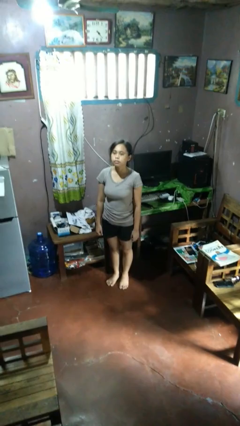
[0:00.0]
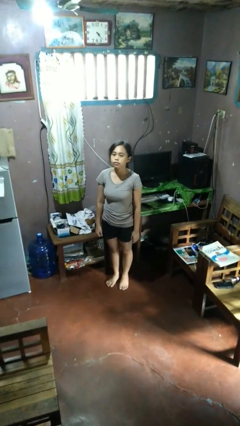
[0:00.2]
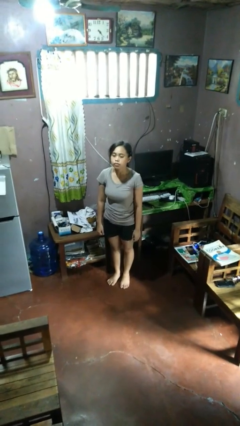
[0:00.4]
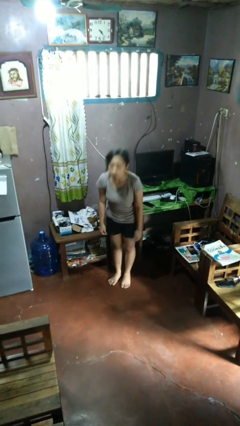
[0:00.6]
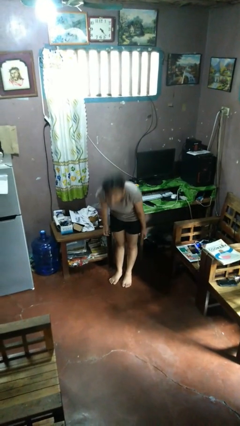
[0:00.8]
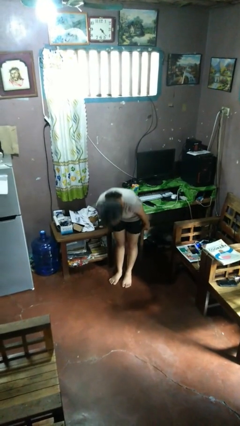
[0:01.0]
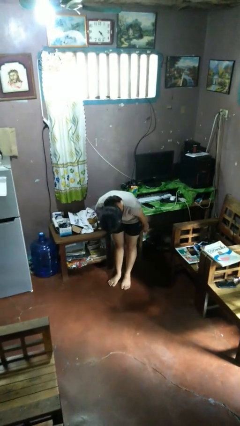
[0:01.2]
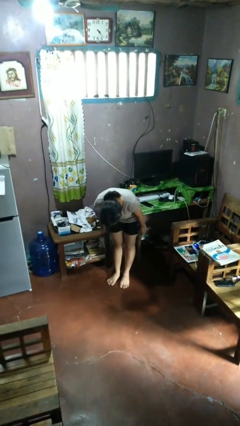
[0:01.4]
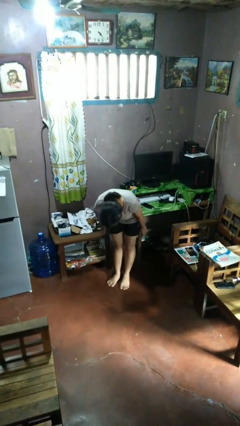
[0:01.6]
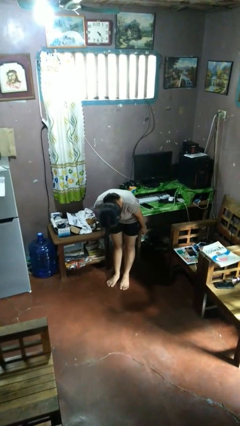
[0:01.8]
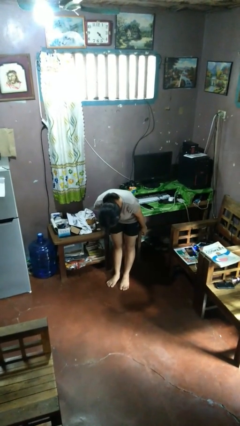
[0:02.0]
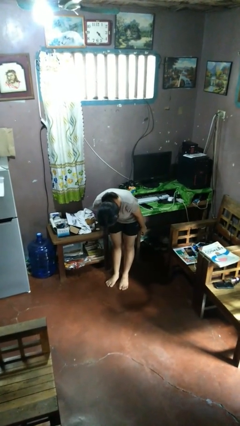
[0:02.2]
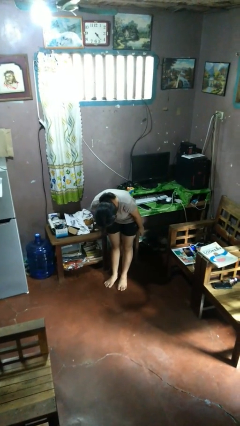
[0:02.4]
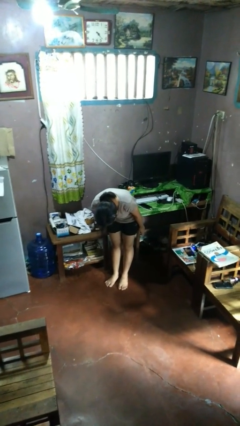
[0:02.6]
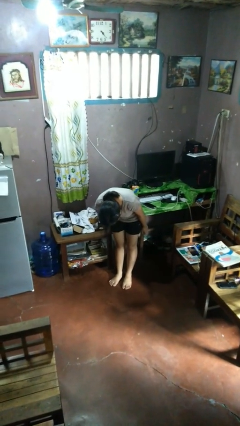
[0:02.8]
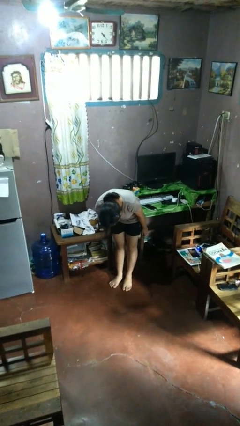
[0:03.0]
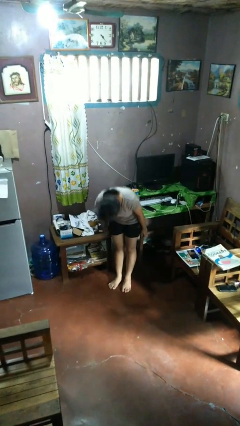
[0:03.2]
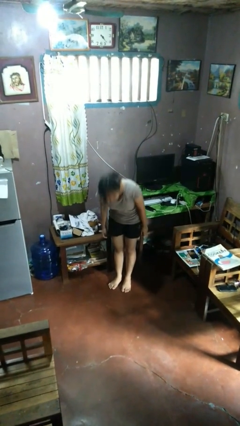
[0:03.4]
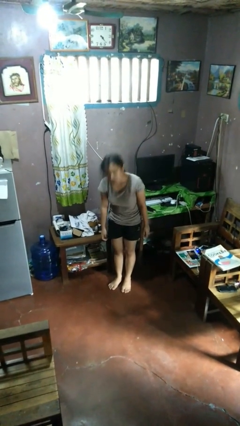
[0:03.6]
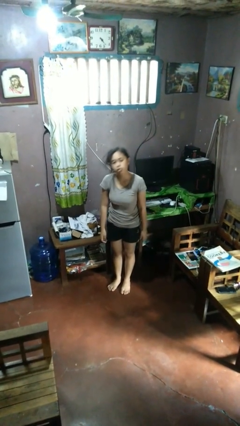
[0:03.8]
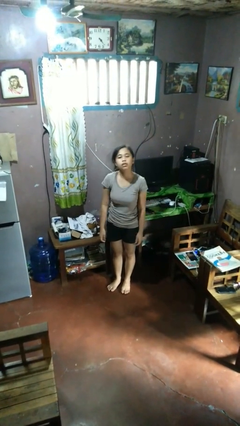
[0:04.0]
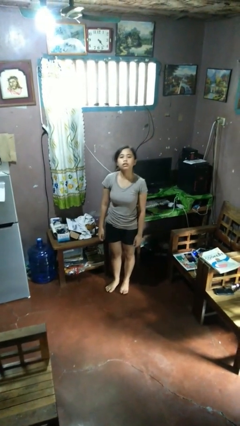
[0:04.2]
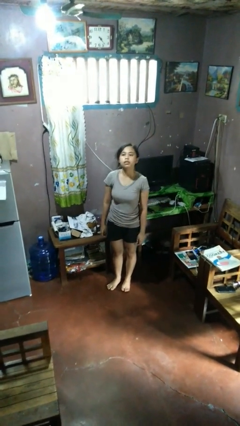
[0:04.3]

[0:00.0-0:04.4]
person bows

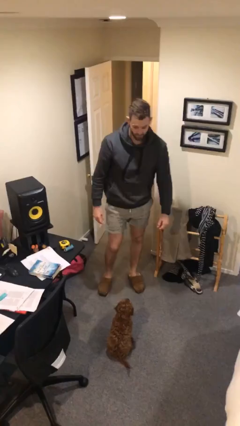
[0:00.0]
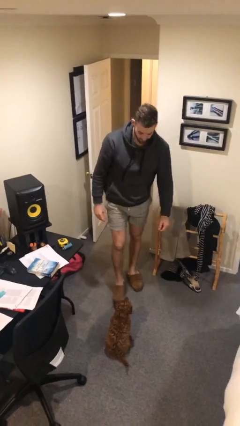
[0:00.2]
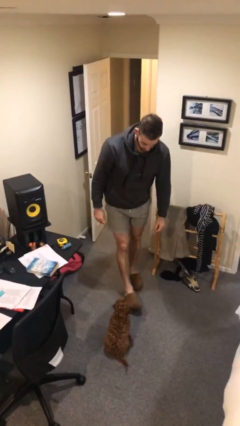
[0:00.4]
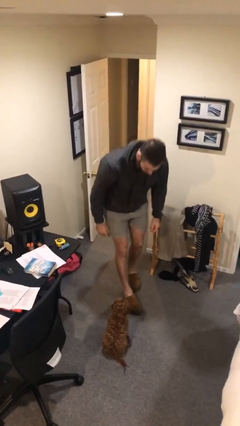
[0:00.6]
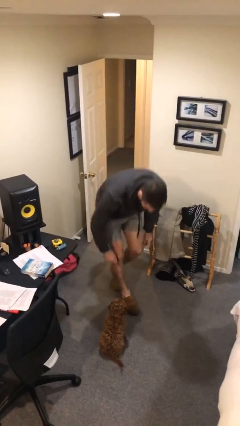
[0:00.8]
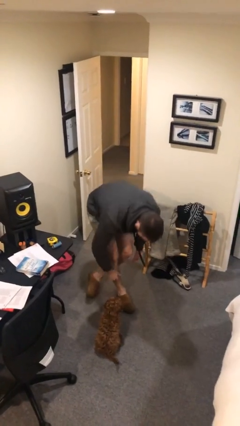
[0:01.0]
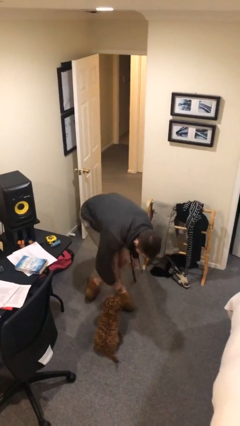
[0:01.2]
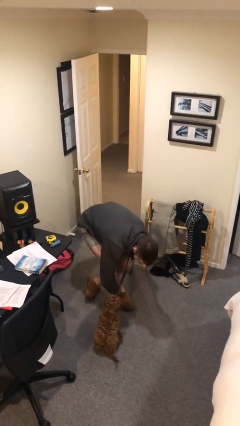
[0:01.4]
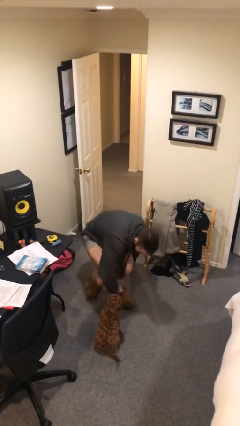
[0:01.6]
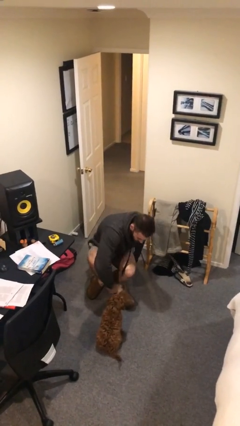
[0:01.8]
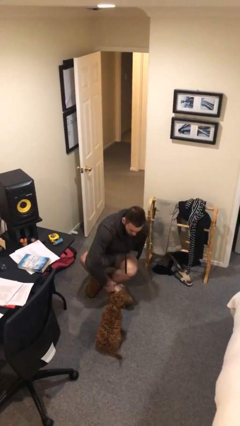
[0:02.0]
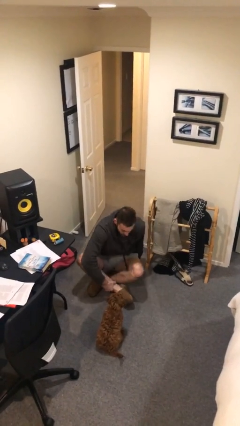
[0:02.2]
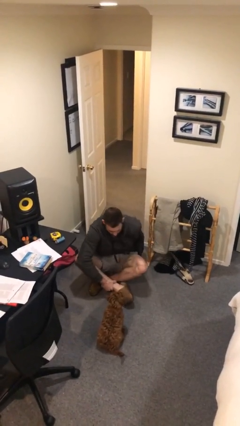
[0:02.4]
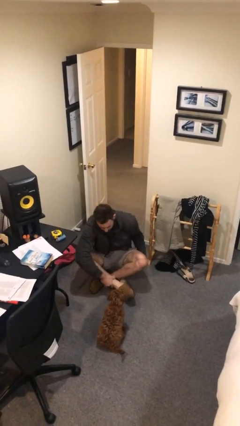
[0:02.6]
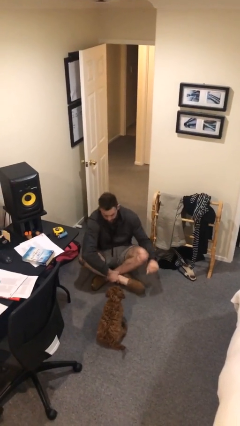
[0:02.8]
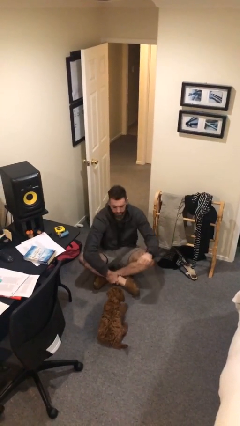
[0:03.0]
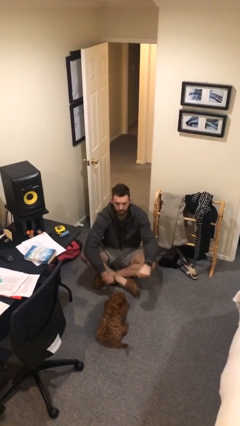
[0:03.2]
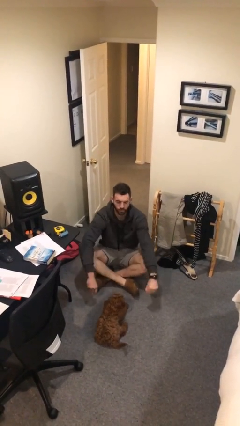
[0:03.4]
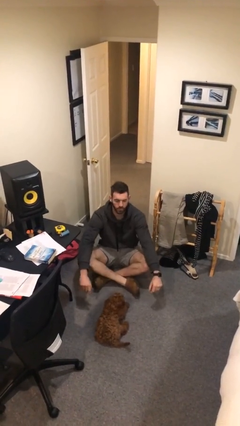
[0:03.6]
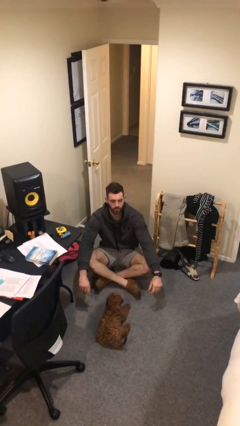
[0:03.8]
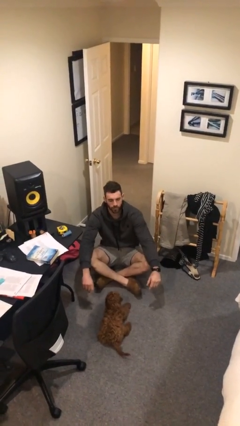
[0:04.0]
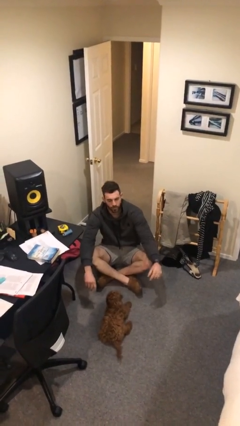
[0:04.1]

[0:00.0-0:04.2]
person sits crisscross

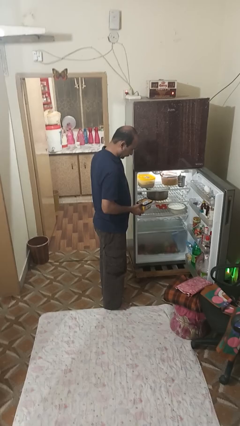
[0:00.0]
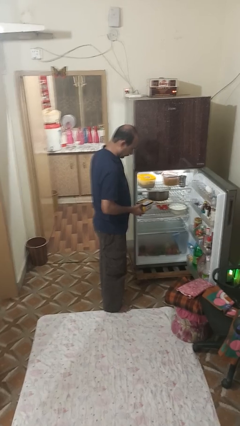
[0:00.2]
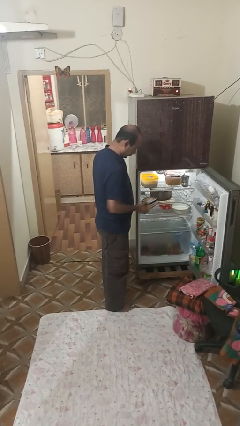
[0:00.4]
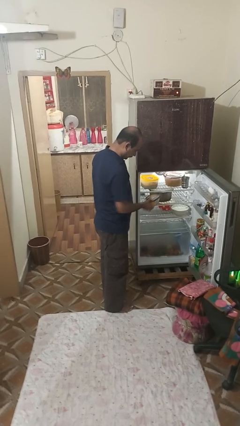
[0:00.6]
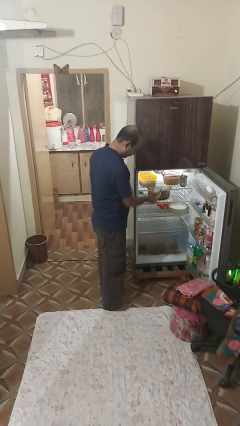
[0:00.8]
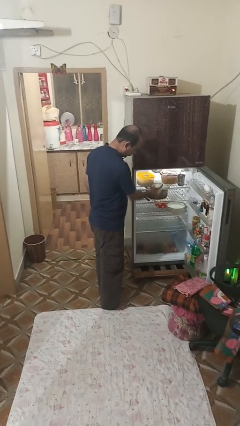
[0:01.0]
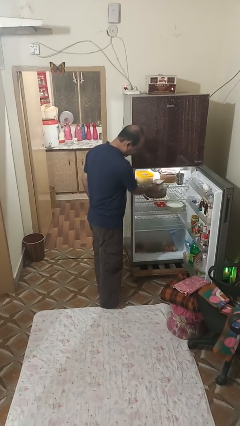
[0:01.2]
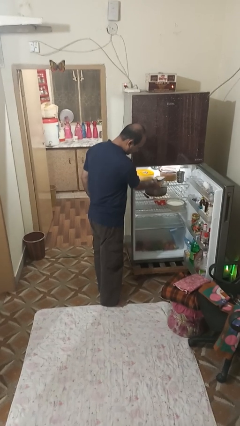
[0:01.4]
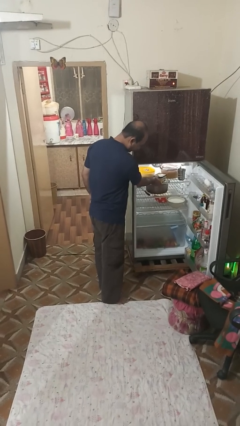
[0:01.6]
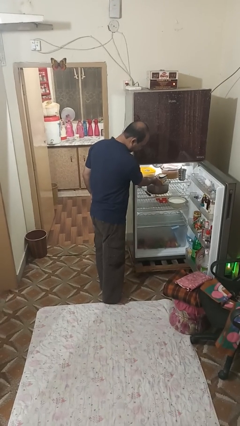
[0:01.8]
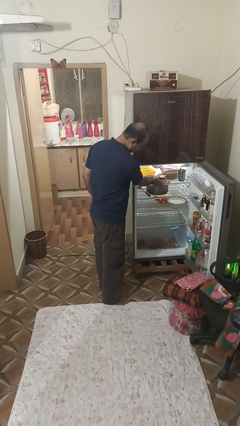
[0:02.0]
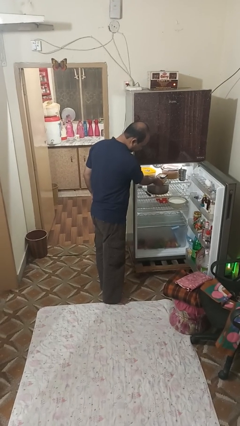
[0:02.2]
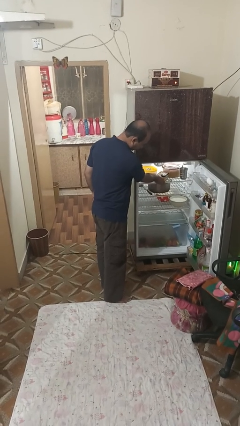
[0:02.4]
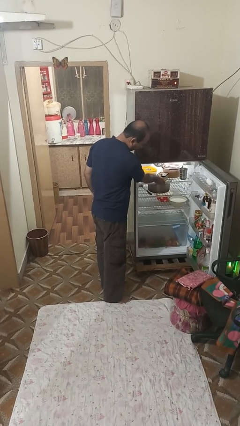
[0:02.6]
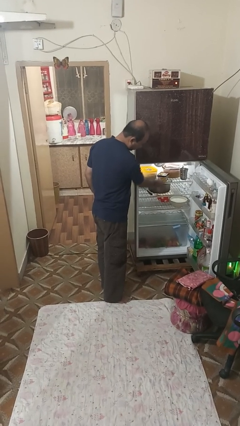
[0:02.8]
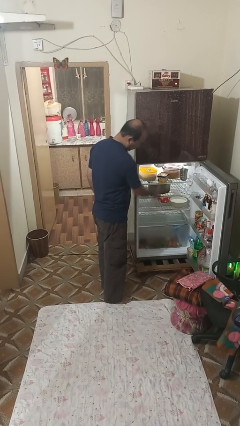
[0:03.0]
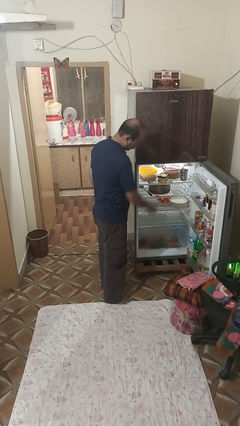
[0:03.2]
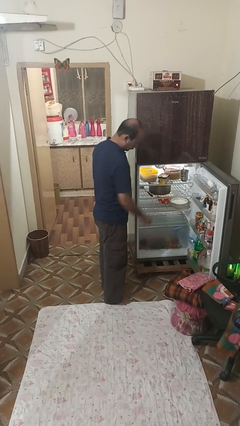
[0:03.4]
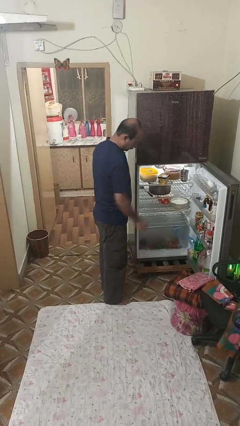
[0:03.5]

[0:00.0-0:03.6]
person puts object into refrigerator

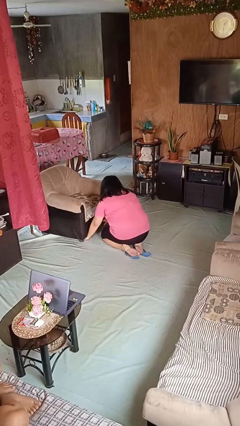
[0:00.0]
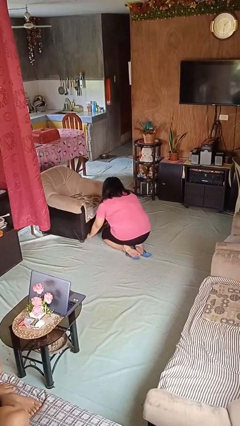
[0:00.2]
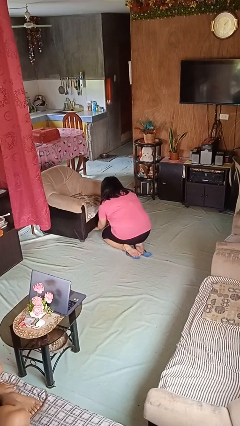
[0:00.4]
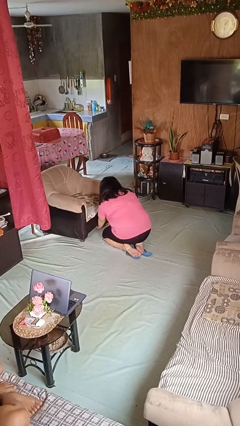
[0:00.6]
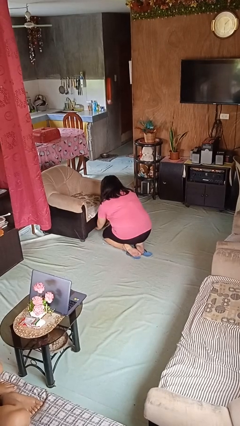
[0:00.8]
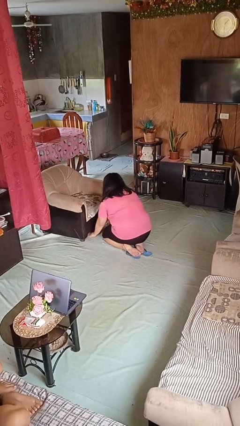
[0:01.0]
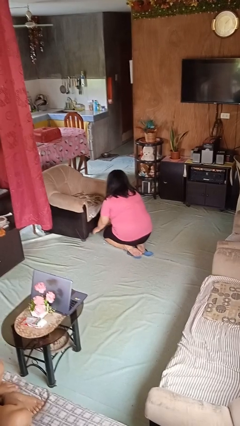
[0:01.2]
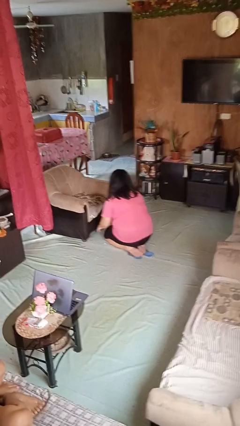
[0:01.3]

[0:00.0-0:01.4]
person searches under couch

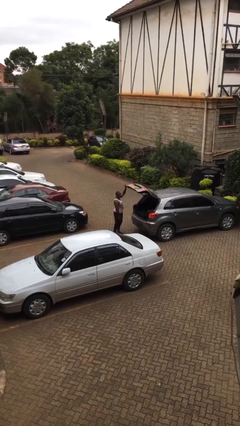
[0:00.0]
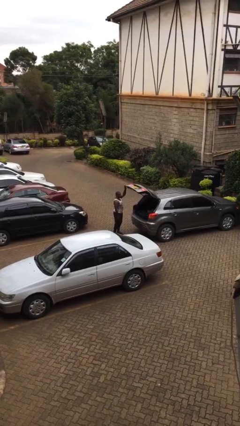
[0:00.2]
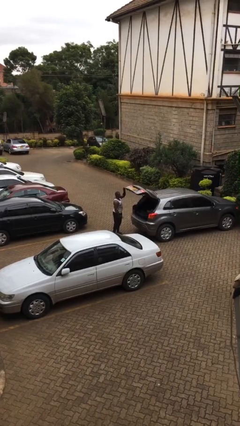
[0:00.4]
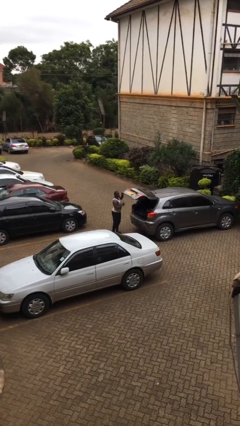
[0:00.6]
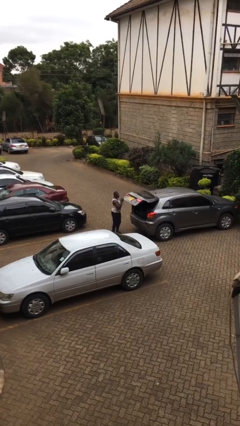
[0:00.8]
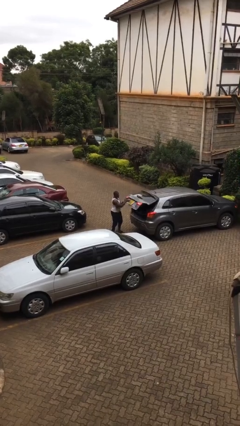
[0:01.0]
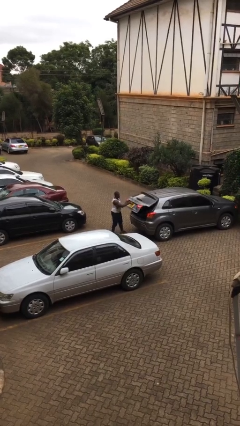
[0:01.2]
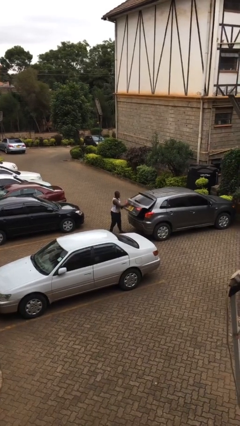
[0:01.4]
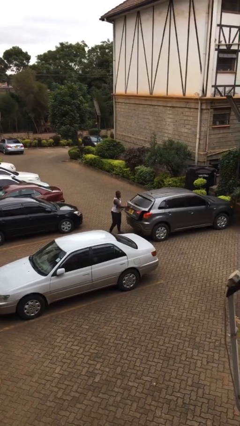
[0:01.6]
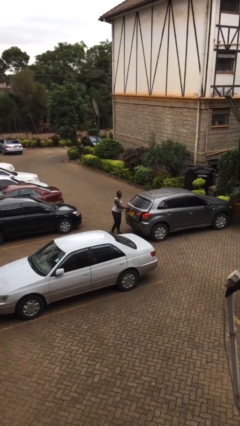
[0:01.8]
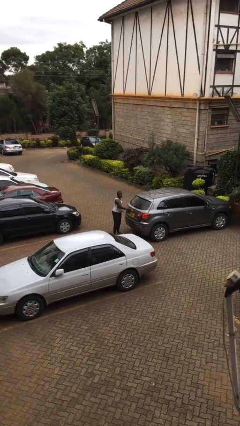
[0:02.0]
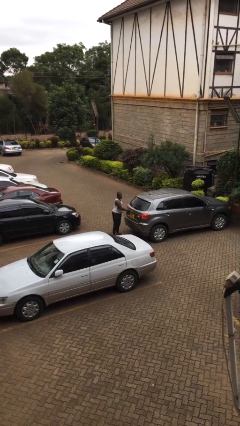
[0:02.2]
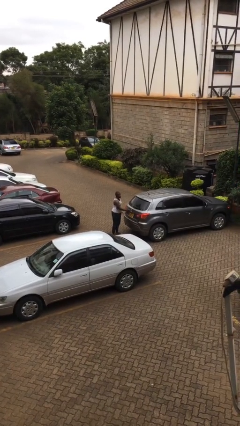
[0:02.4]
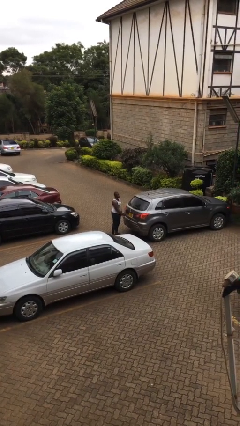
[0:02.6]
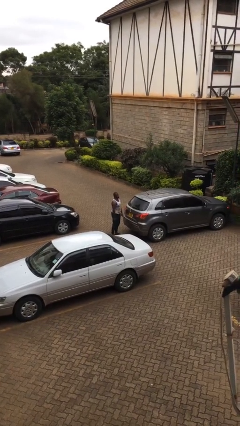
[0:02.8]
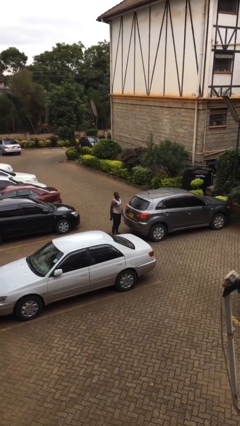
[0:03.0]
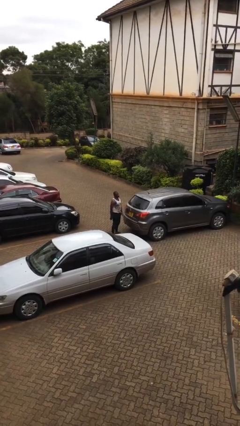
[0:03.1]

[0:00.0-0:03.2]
person closes car trunk

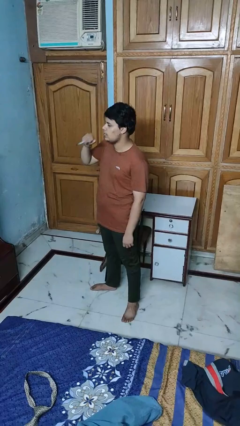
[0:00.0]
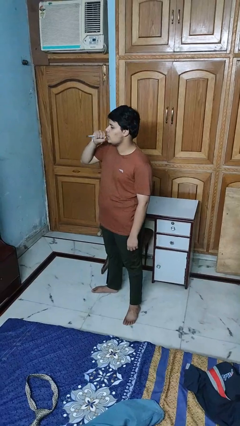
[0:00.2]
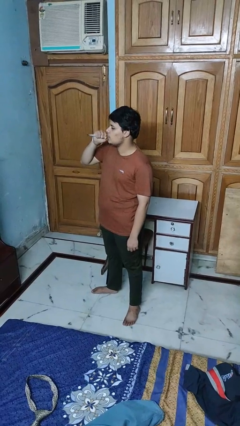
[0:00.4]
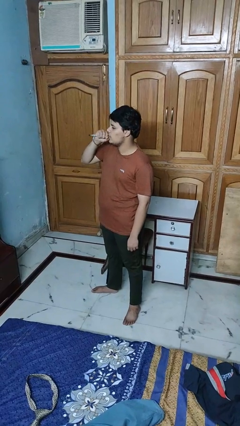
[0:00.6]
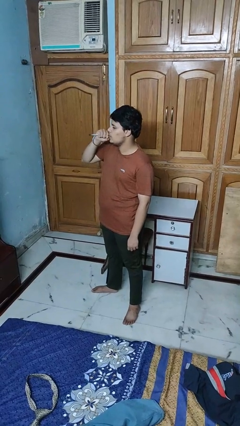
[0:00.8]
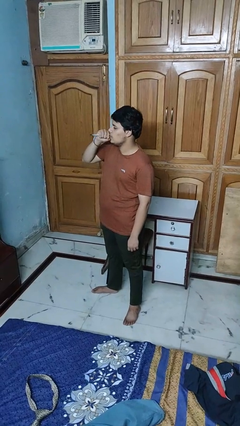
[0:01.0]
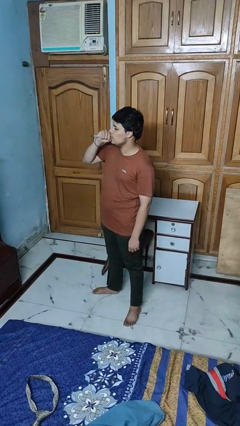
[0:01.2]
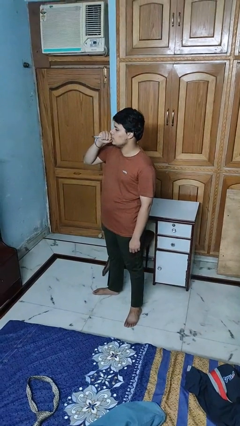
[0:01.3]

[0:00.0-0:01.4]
person vapes
